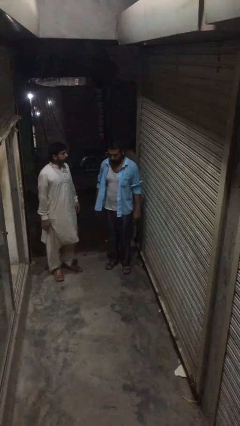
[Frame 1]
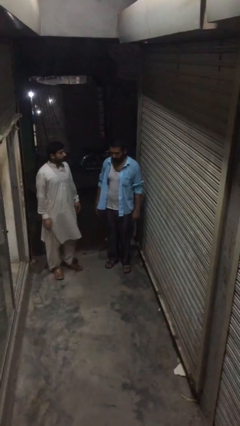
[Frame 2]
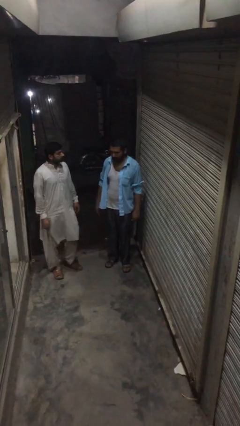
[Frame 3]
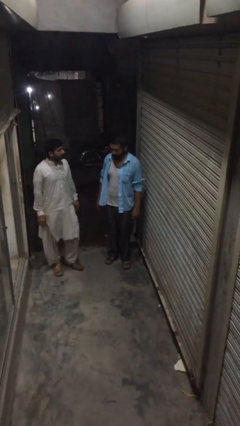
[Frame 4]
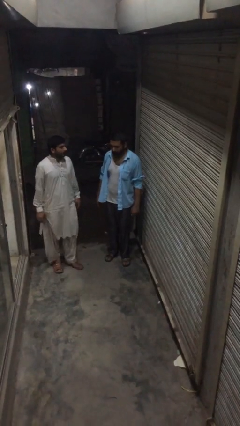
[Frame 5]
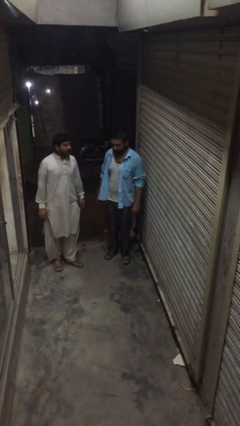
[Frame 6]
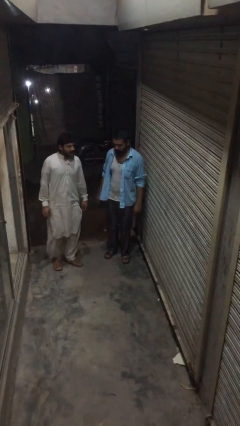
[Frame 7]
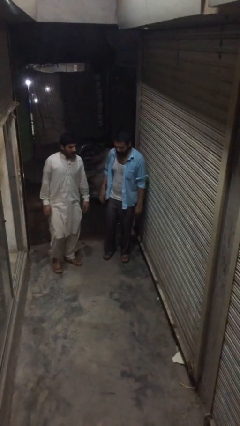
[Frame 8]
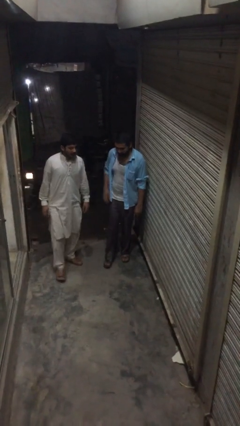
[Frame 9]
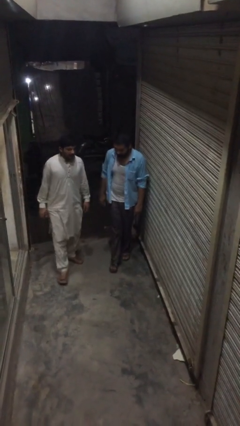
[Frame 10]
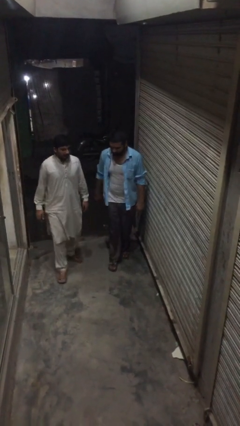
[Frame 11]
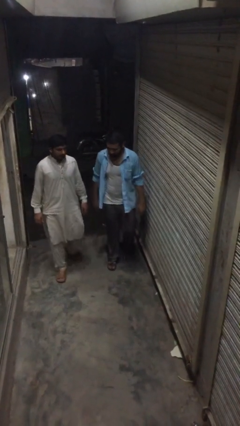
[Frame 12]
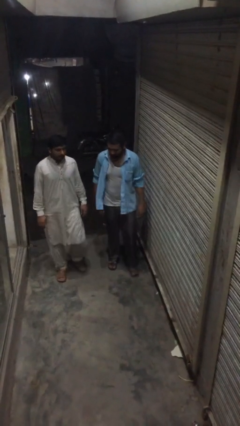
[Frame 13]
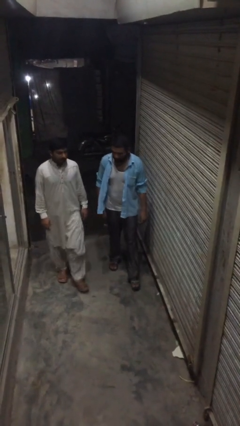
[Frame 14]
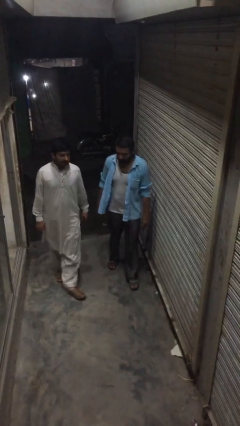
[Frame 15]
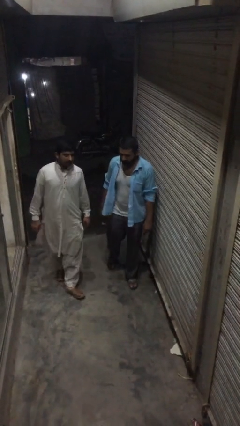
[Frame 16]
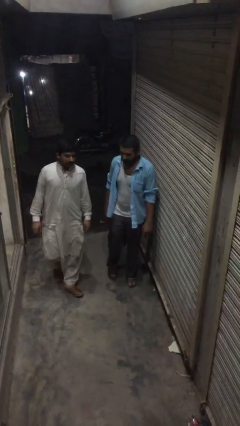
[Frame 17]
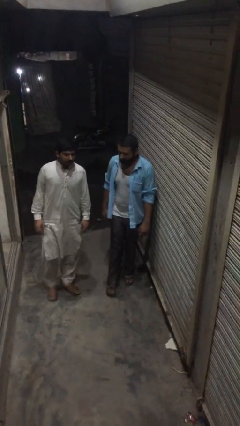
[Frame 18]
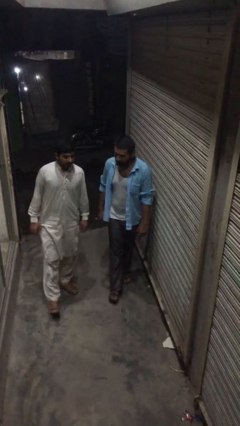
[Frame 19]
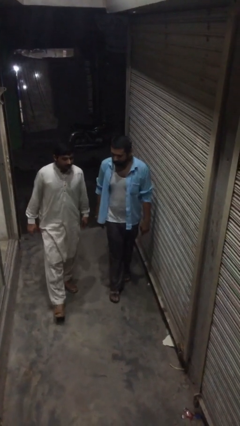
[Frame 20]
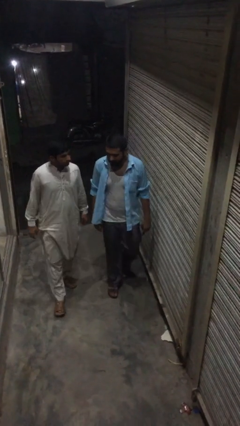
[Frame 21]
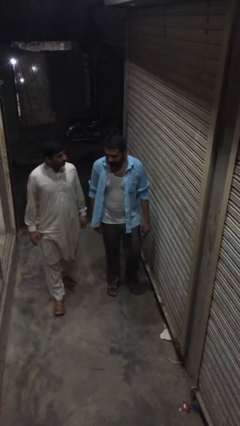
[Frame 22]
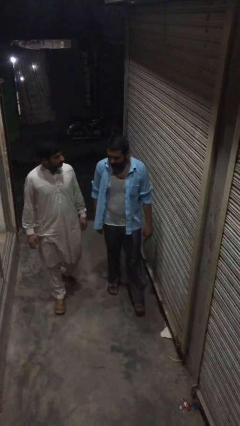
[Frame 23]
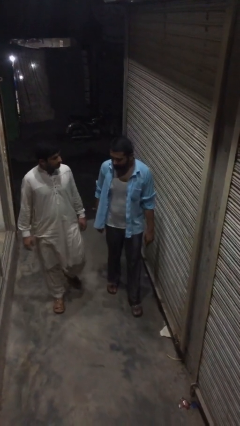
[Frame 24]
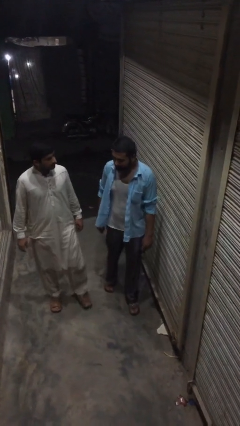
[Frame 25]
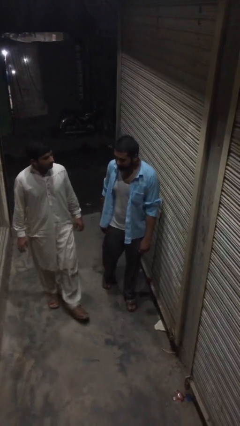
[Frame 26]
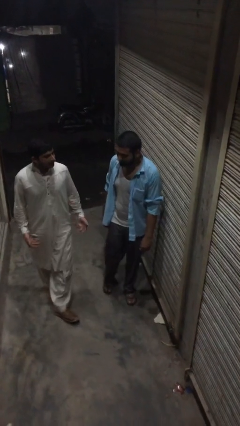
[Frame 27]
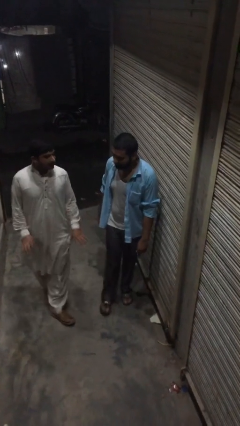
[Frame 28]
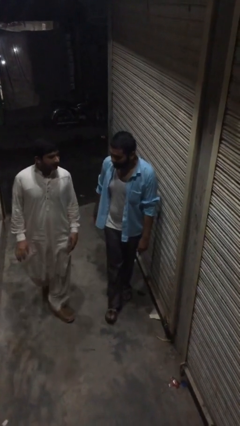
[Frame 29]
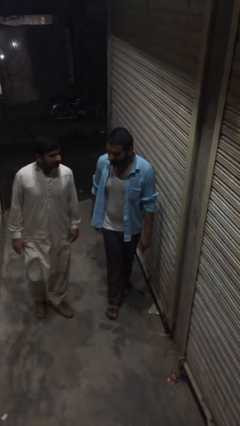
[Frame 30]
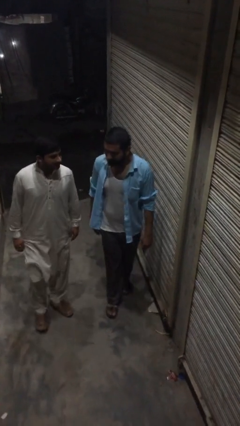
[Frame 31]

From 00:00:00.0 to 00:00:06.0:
person talks to person

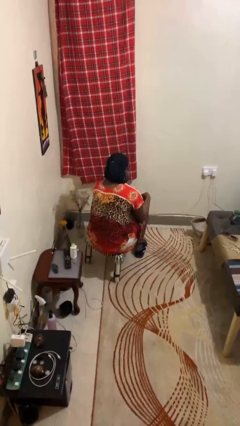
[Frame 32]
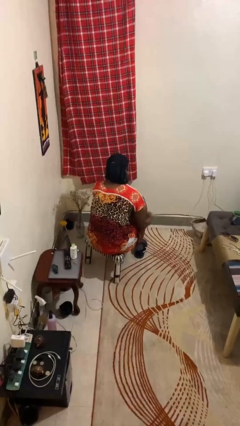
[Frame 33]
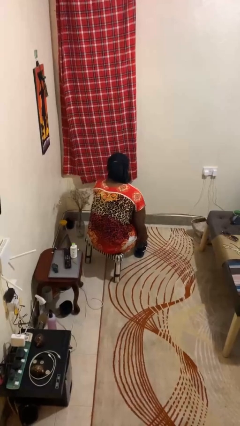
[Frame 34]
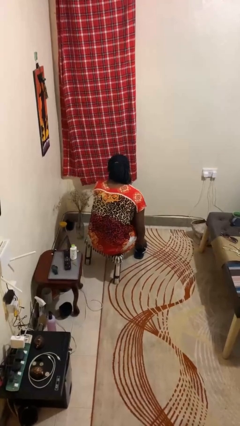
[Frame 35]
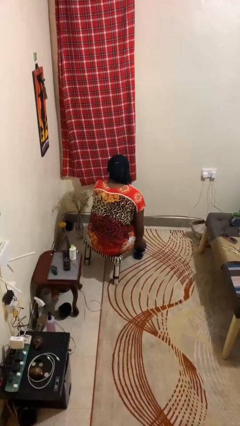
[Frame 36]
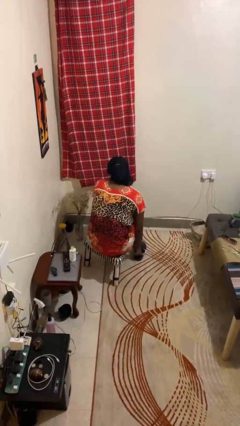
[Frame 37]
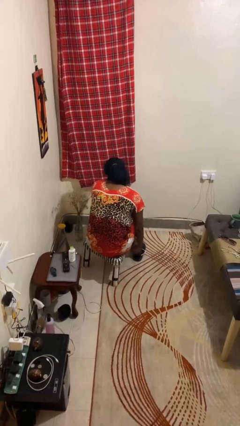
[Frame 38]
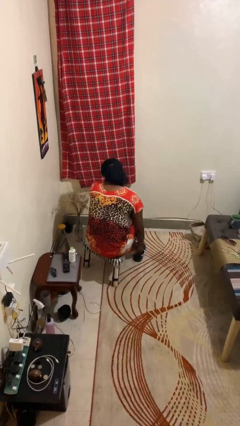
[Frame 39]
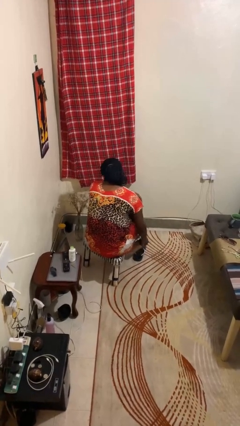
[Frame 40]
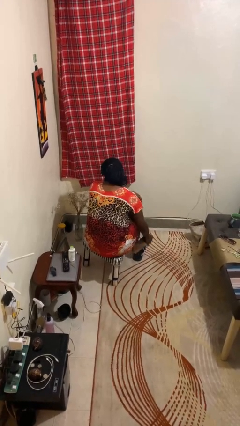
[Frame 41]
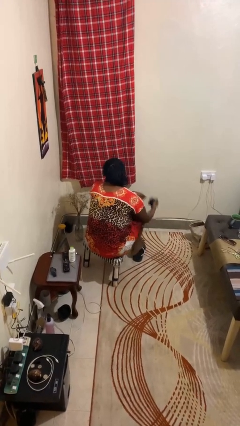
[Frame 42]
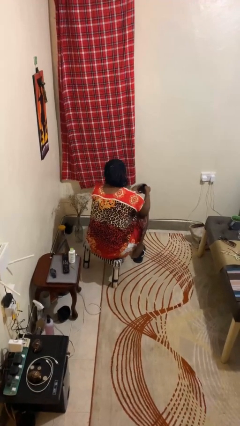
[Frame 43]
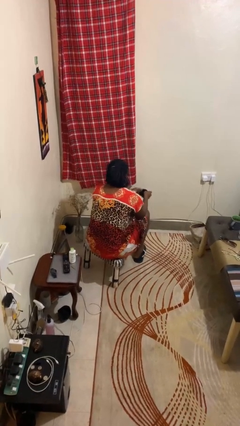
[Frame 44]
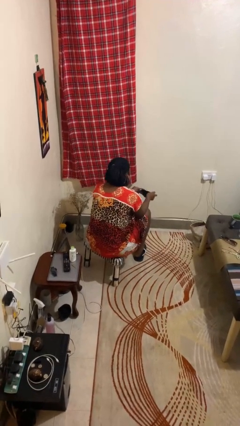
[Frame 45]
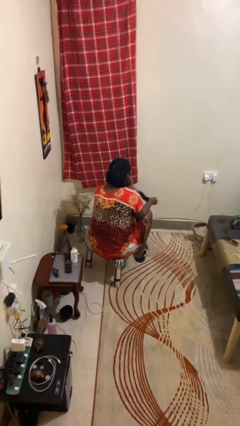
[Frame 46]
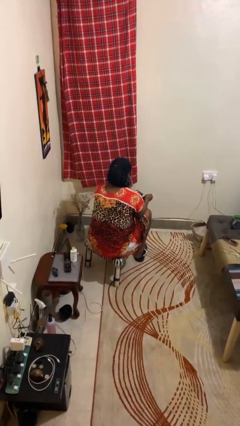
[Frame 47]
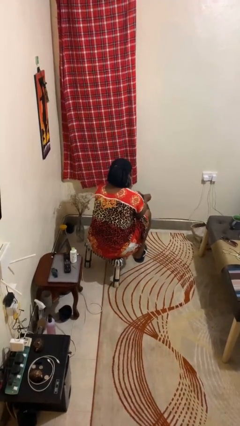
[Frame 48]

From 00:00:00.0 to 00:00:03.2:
person takes off socks

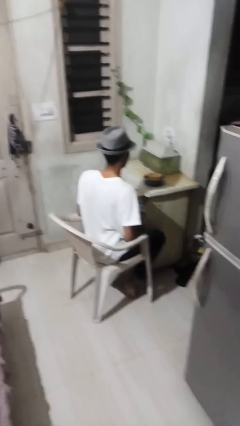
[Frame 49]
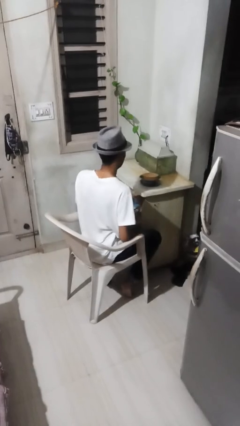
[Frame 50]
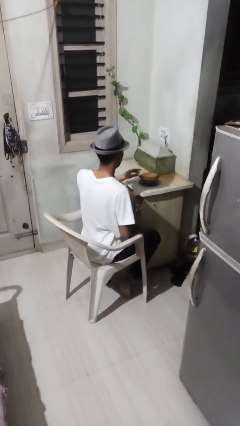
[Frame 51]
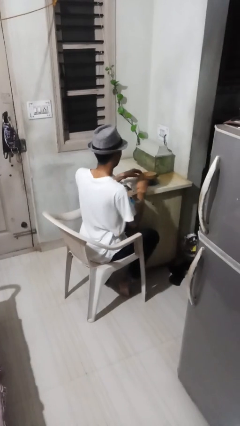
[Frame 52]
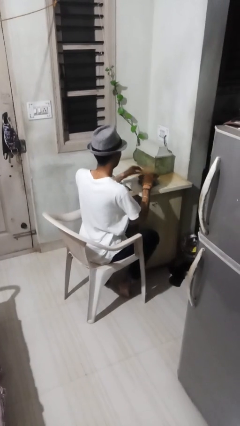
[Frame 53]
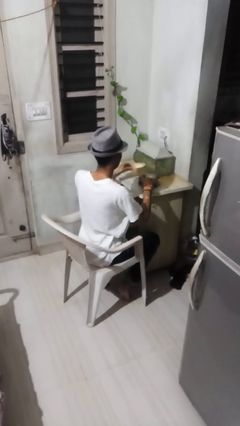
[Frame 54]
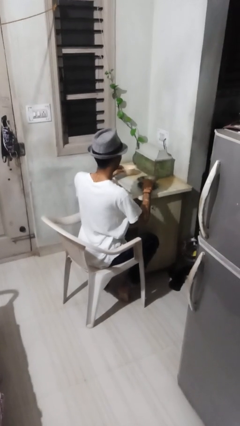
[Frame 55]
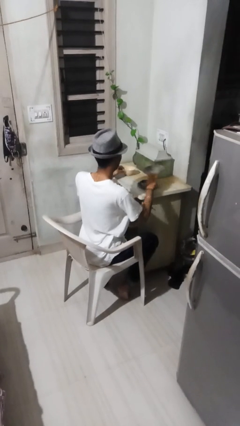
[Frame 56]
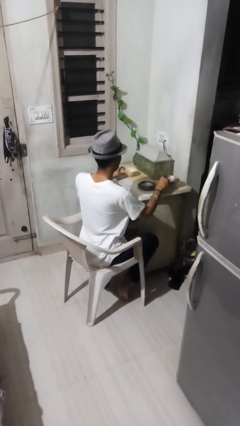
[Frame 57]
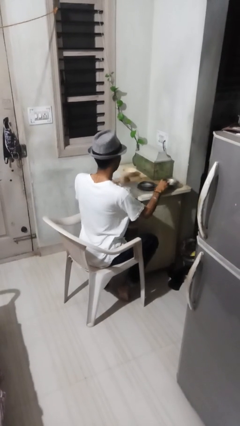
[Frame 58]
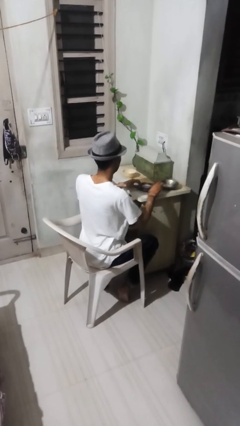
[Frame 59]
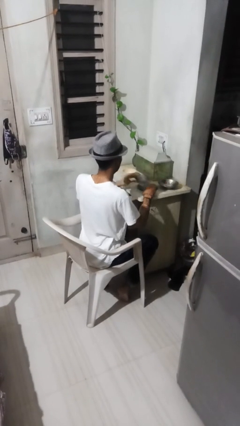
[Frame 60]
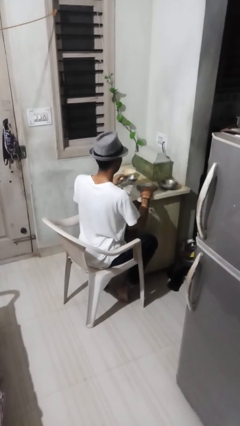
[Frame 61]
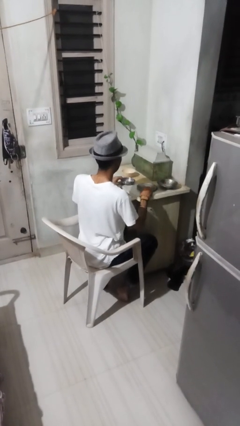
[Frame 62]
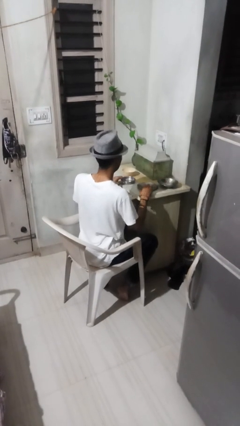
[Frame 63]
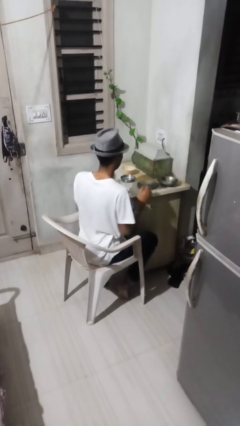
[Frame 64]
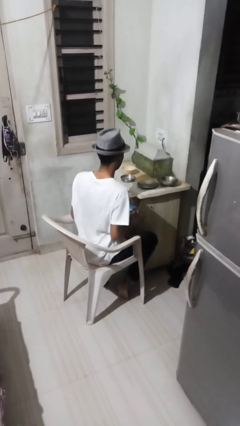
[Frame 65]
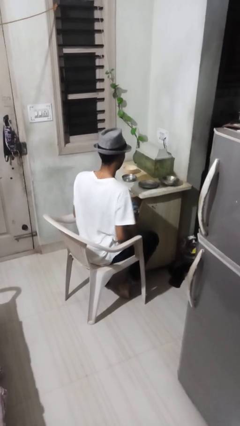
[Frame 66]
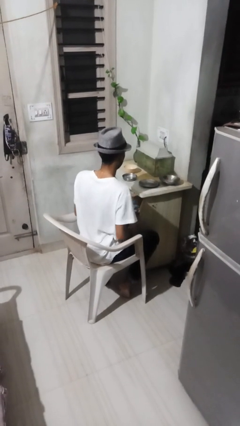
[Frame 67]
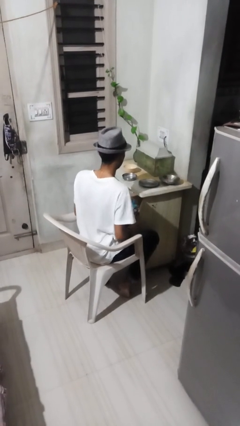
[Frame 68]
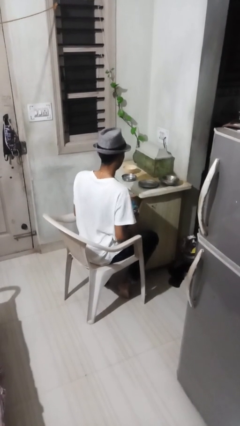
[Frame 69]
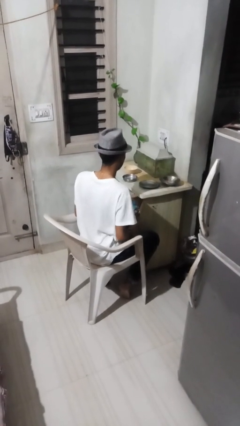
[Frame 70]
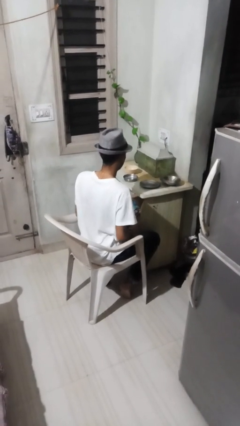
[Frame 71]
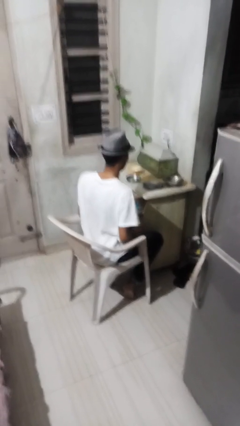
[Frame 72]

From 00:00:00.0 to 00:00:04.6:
person sets table

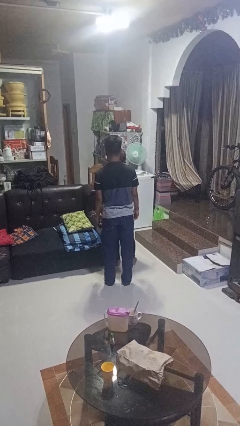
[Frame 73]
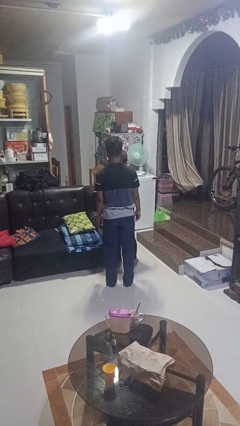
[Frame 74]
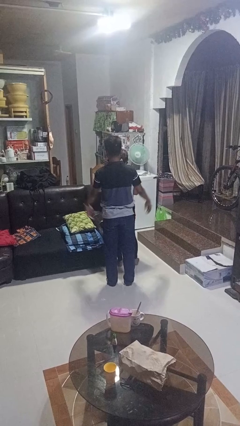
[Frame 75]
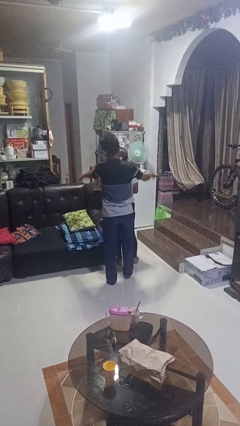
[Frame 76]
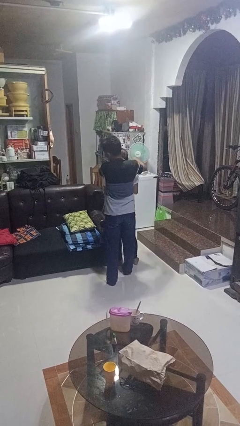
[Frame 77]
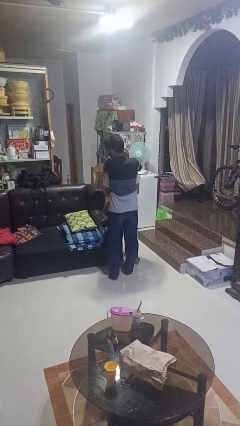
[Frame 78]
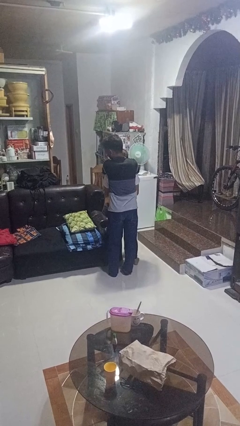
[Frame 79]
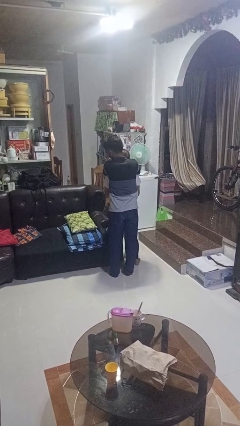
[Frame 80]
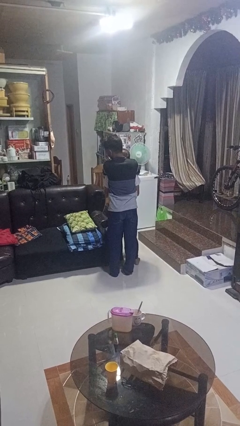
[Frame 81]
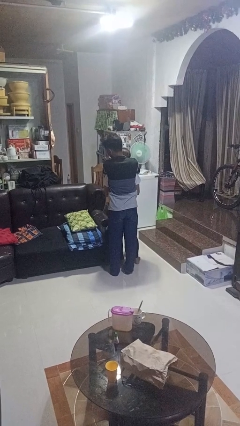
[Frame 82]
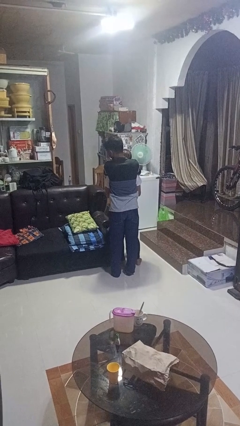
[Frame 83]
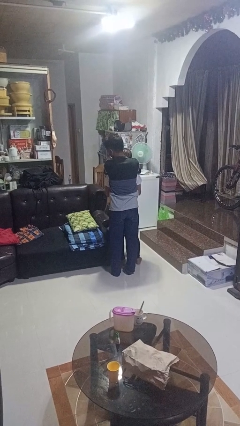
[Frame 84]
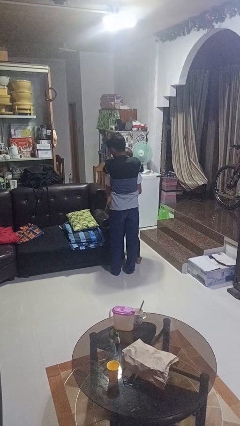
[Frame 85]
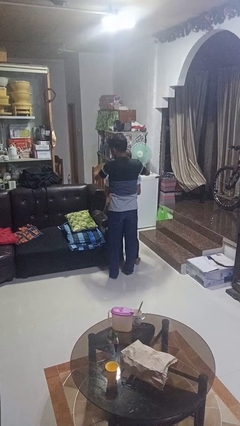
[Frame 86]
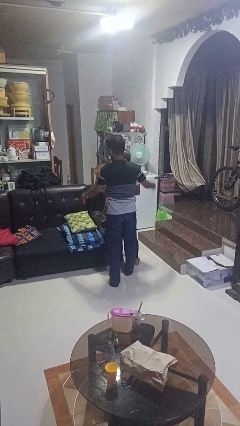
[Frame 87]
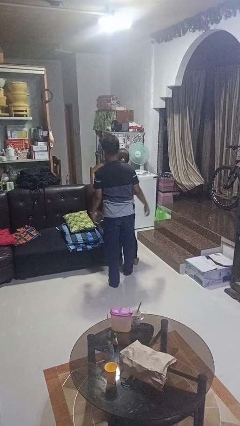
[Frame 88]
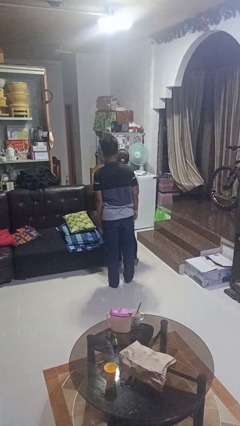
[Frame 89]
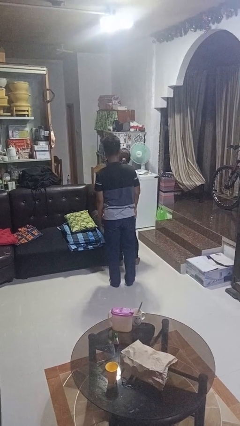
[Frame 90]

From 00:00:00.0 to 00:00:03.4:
person hugs person from behind

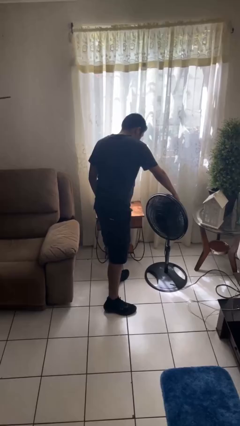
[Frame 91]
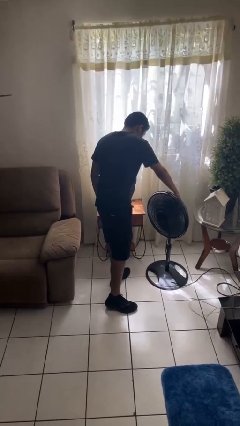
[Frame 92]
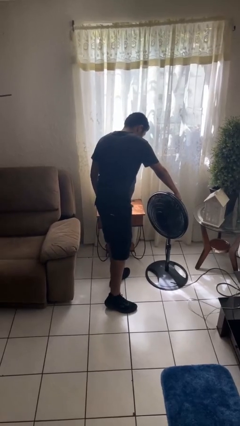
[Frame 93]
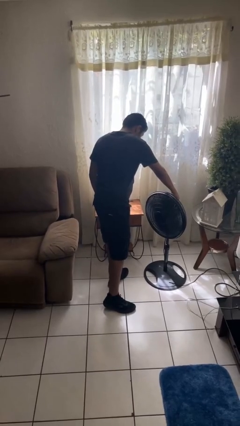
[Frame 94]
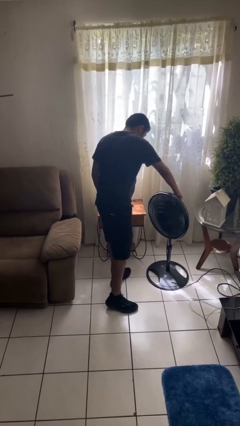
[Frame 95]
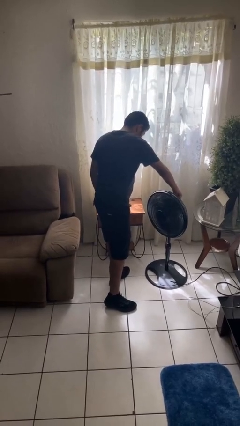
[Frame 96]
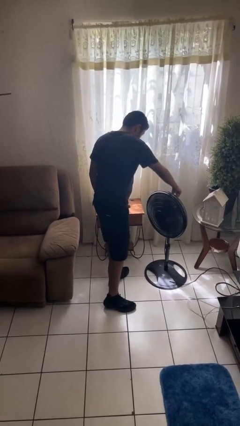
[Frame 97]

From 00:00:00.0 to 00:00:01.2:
person turns off fan
